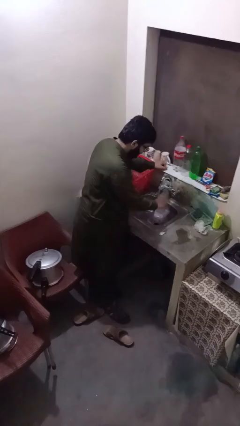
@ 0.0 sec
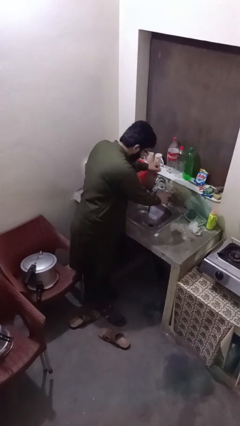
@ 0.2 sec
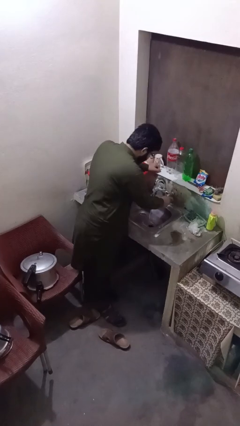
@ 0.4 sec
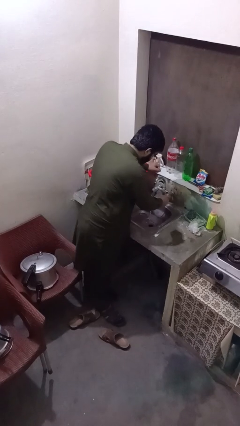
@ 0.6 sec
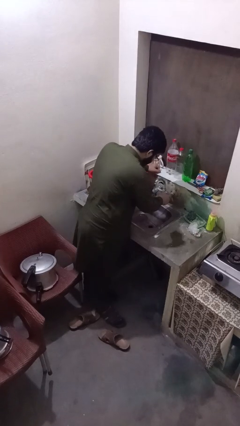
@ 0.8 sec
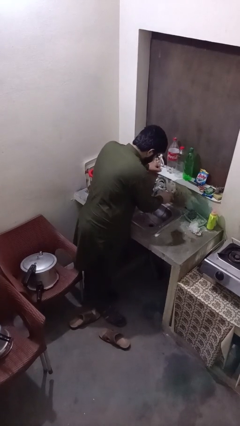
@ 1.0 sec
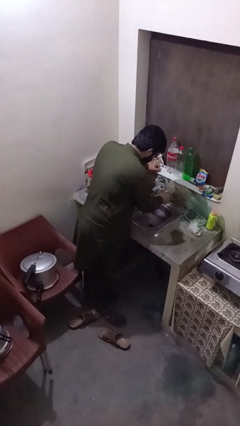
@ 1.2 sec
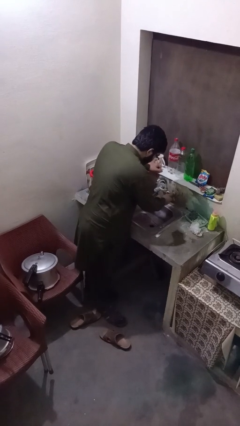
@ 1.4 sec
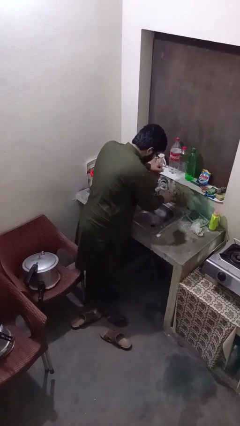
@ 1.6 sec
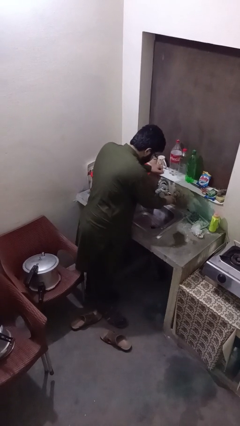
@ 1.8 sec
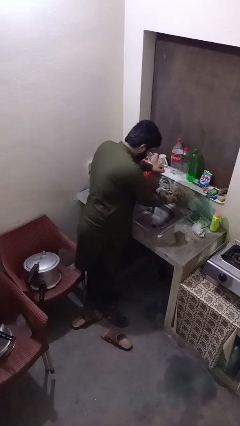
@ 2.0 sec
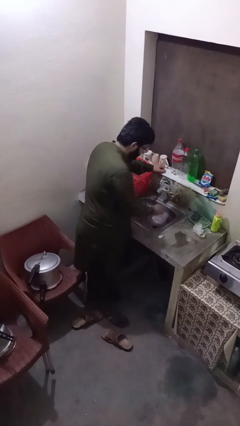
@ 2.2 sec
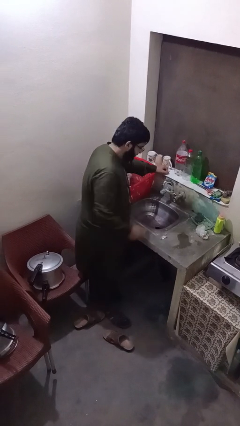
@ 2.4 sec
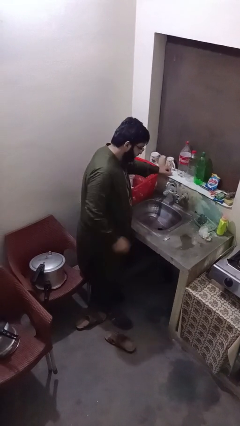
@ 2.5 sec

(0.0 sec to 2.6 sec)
person turns off faucet

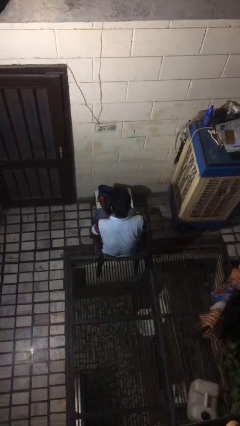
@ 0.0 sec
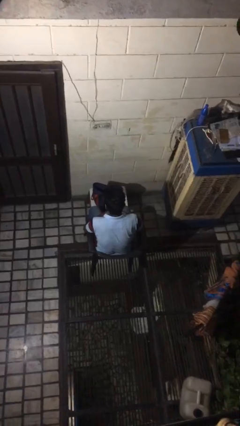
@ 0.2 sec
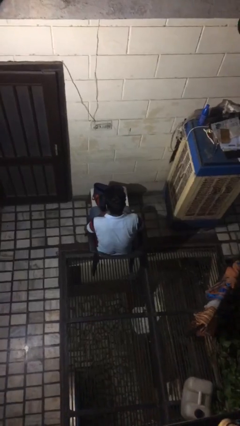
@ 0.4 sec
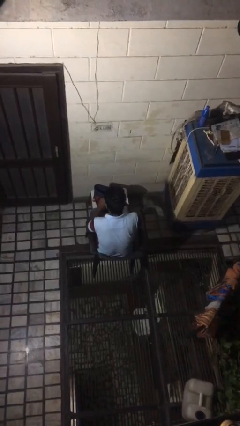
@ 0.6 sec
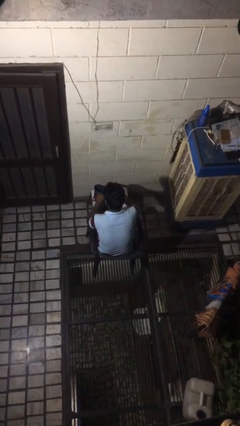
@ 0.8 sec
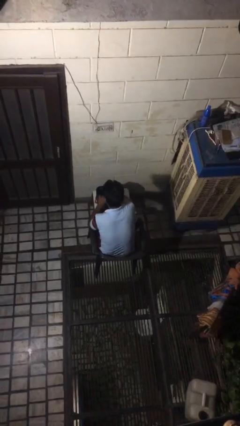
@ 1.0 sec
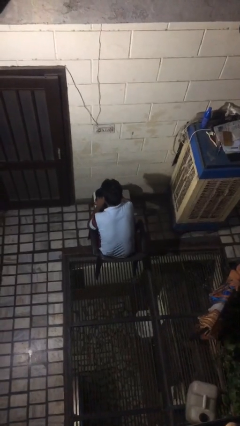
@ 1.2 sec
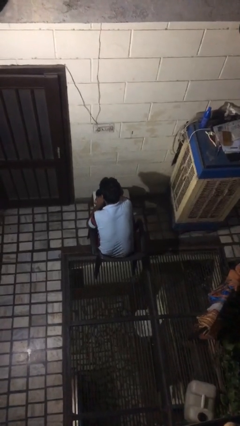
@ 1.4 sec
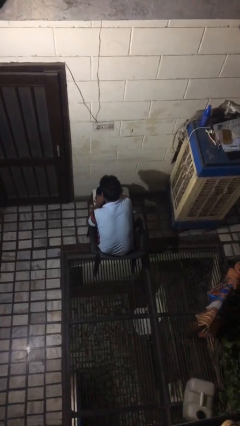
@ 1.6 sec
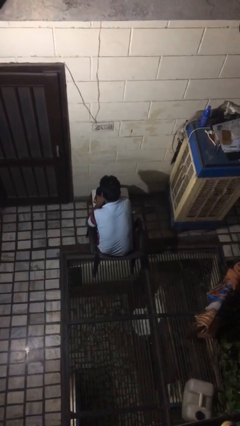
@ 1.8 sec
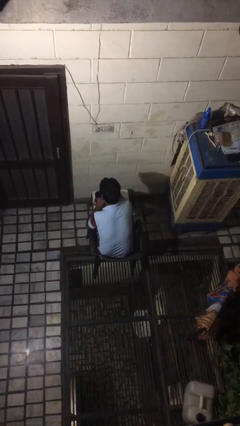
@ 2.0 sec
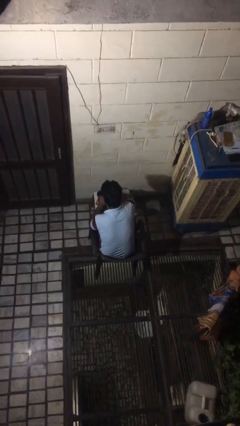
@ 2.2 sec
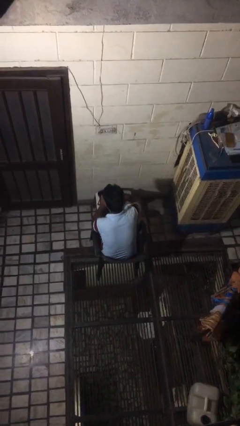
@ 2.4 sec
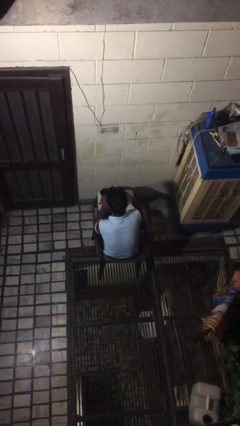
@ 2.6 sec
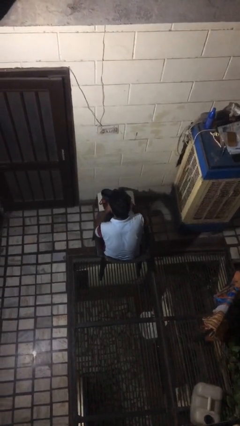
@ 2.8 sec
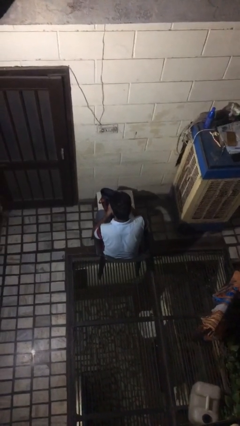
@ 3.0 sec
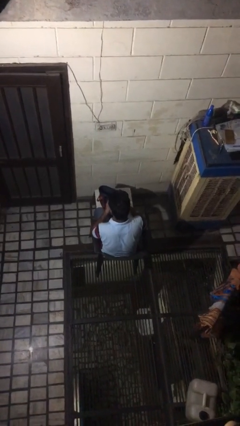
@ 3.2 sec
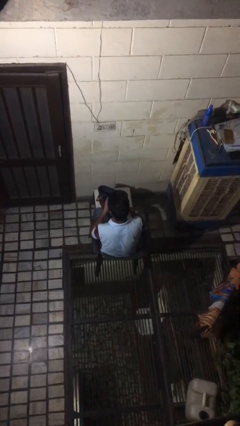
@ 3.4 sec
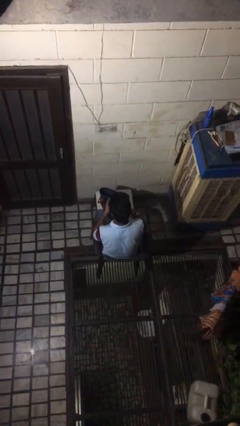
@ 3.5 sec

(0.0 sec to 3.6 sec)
person takes object from bag

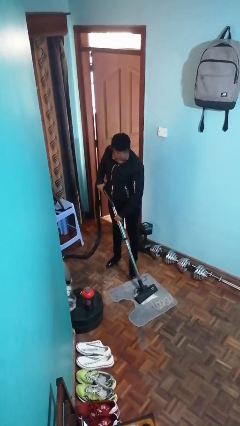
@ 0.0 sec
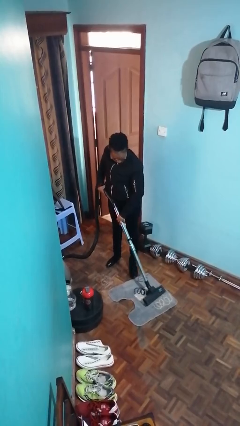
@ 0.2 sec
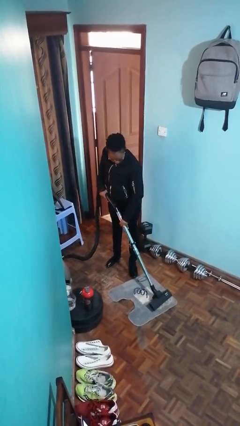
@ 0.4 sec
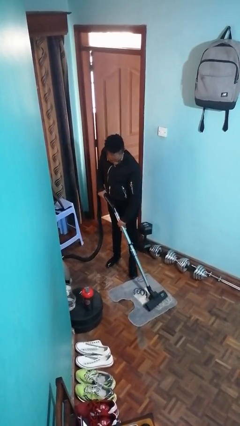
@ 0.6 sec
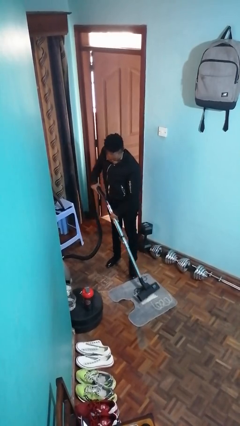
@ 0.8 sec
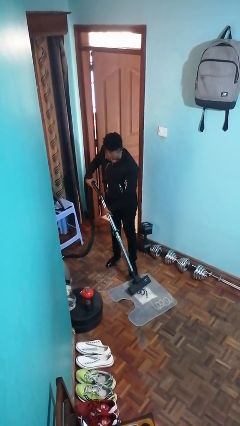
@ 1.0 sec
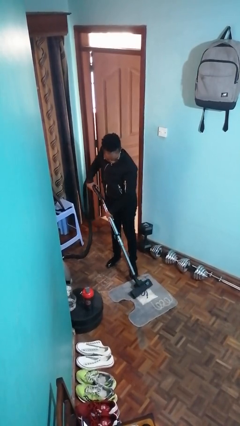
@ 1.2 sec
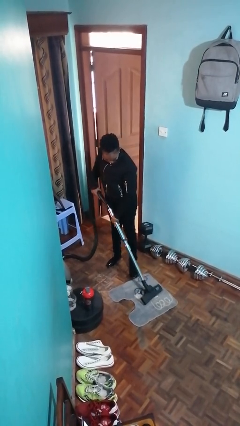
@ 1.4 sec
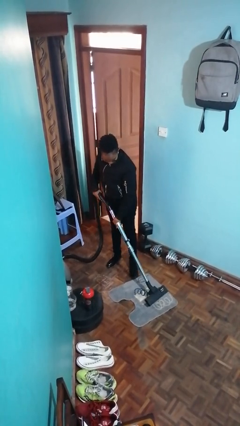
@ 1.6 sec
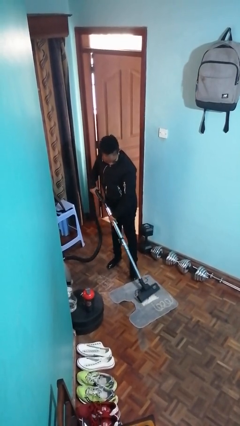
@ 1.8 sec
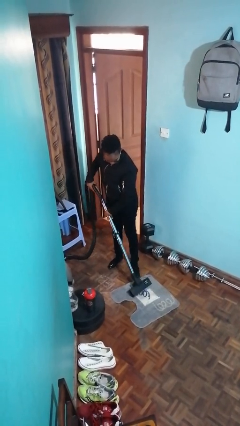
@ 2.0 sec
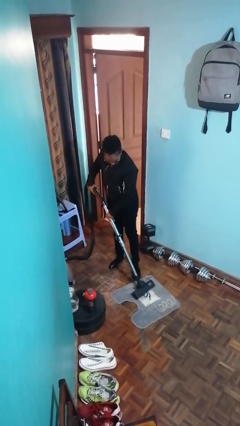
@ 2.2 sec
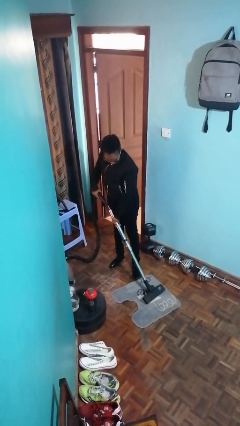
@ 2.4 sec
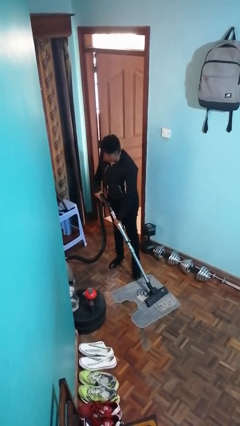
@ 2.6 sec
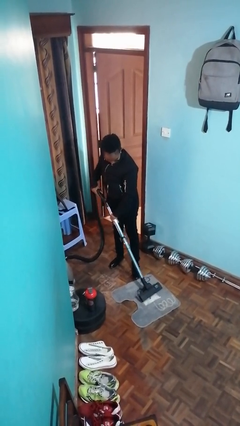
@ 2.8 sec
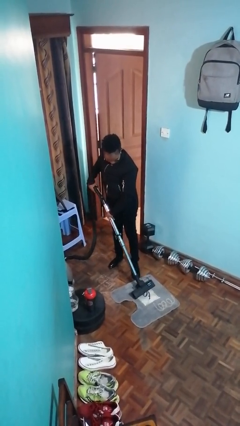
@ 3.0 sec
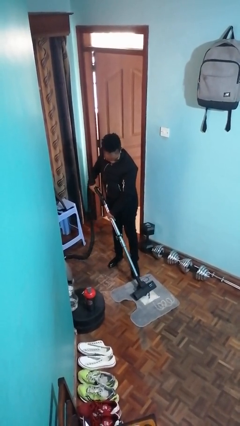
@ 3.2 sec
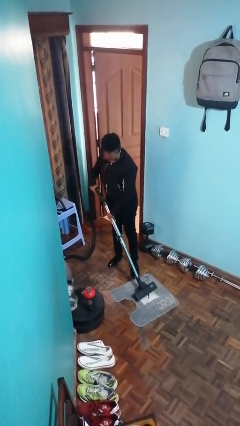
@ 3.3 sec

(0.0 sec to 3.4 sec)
person vacuums carpet

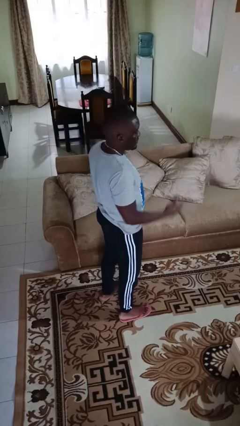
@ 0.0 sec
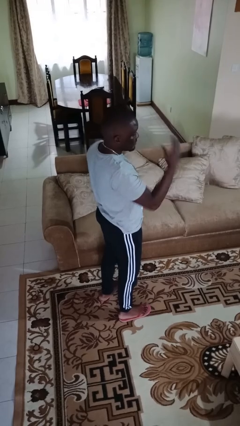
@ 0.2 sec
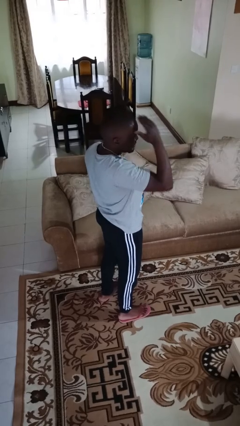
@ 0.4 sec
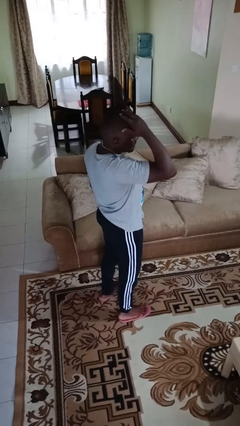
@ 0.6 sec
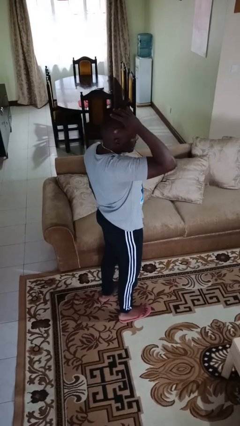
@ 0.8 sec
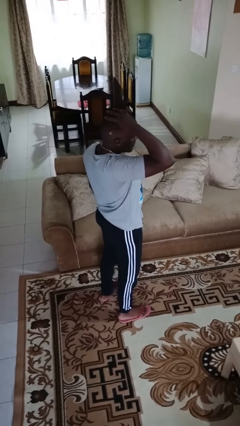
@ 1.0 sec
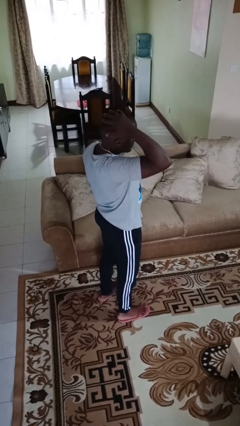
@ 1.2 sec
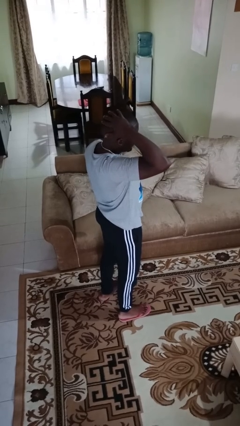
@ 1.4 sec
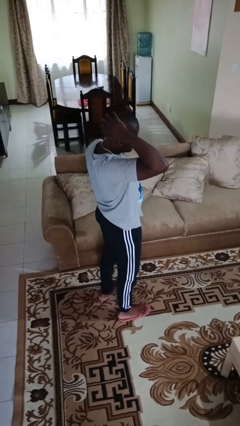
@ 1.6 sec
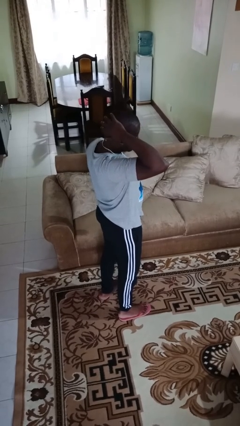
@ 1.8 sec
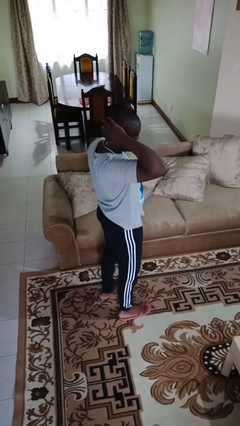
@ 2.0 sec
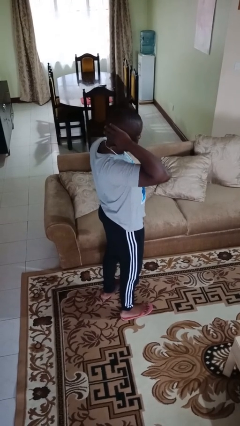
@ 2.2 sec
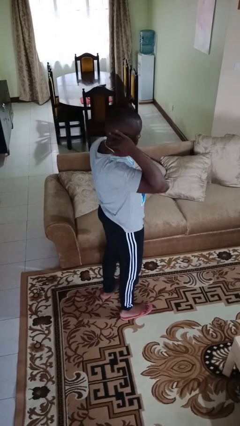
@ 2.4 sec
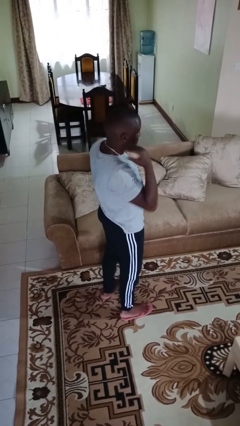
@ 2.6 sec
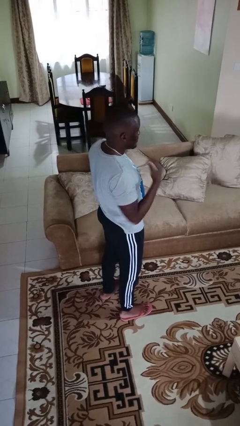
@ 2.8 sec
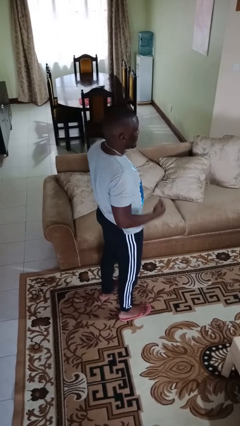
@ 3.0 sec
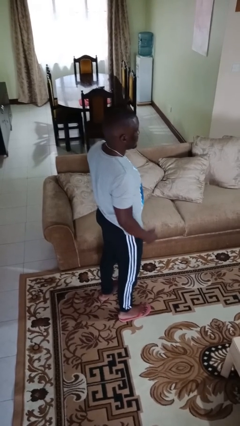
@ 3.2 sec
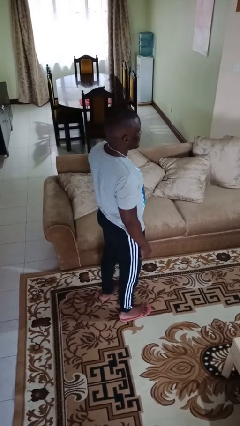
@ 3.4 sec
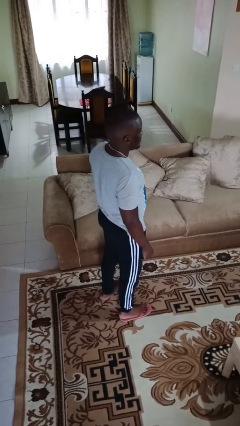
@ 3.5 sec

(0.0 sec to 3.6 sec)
person strokes hair

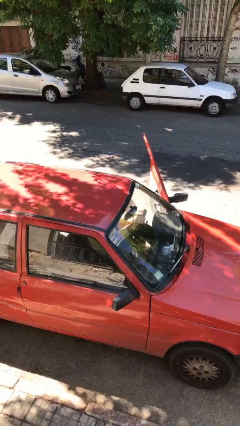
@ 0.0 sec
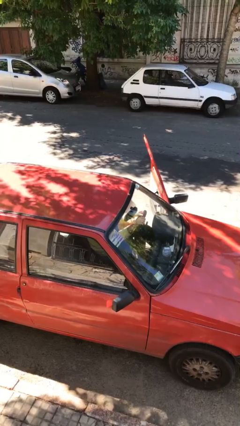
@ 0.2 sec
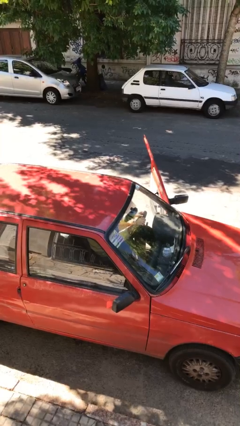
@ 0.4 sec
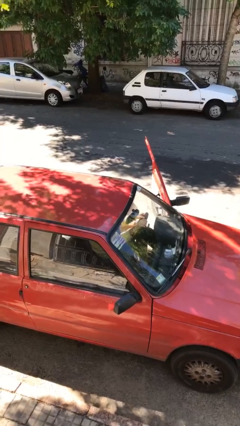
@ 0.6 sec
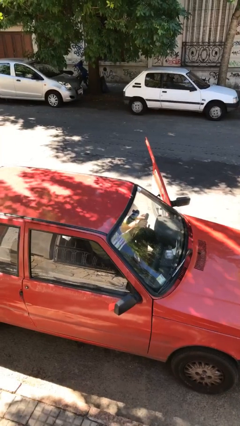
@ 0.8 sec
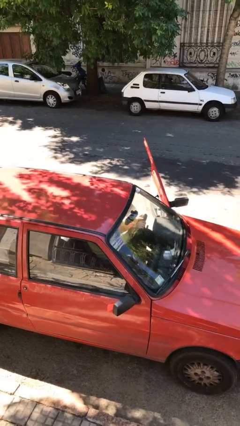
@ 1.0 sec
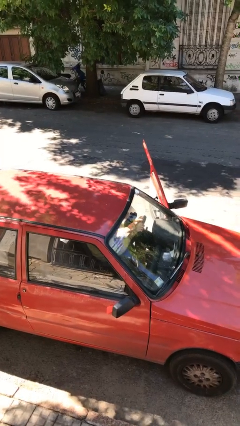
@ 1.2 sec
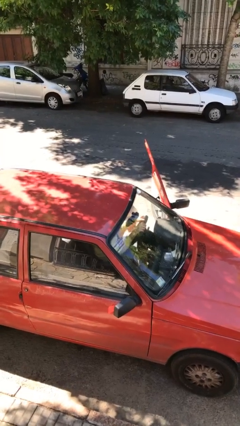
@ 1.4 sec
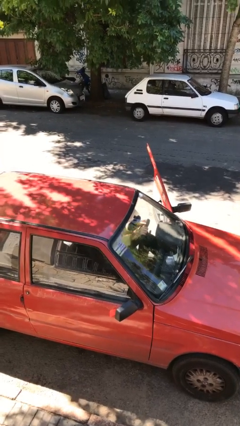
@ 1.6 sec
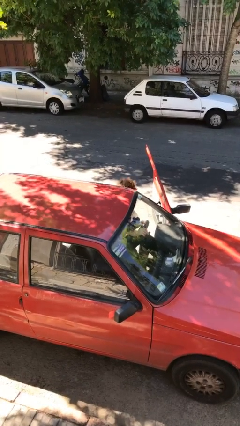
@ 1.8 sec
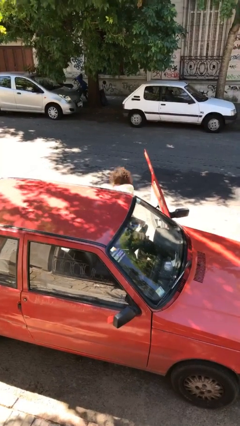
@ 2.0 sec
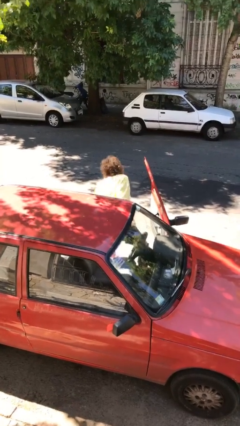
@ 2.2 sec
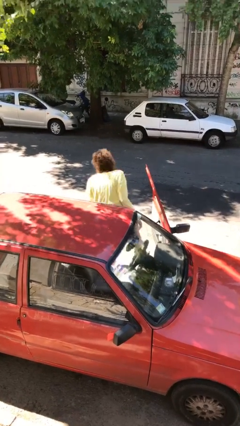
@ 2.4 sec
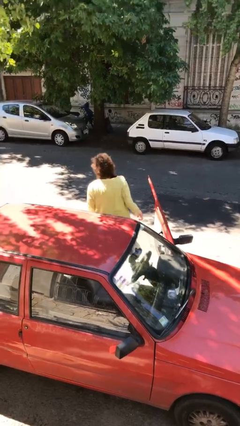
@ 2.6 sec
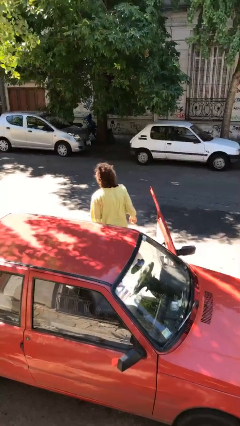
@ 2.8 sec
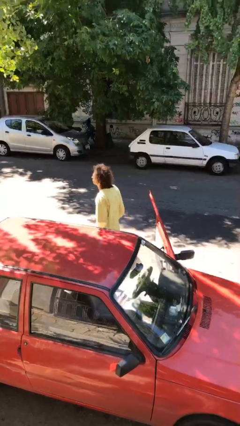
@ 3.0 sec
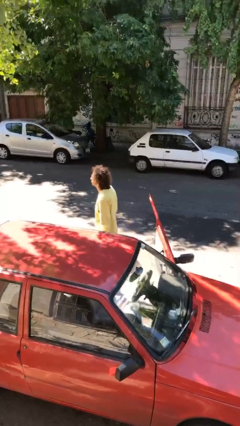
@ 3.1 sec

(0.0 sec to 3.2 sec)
person exits car

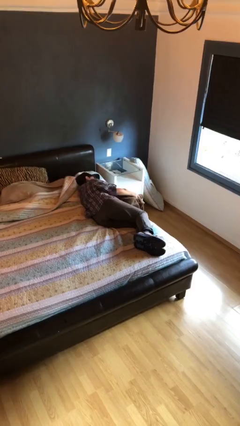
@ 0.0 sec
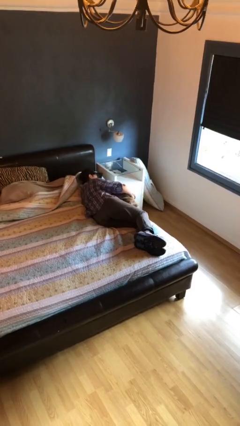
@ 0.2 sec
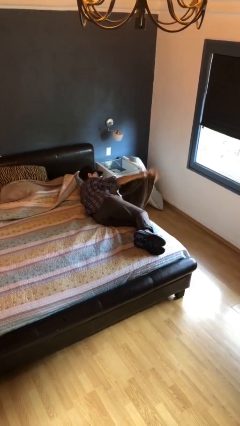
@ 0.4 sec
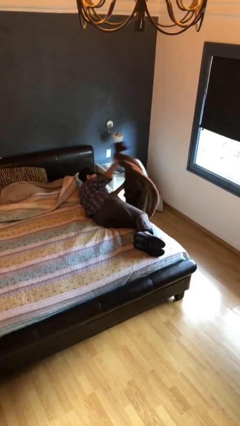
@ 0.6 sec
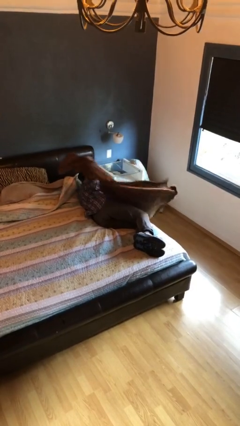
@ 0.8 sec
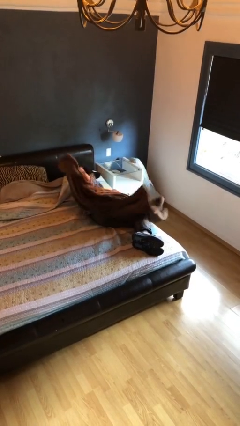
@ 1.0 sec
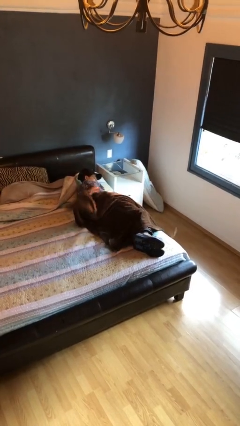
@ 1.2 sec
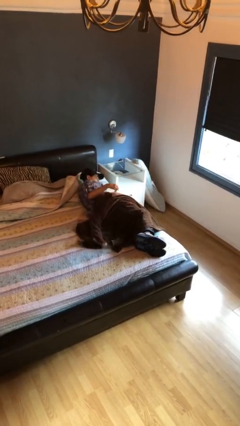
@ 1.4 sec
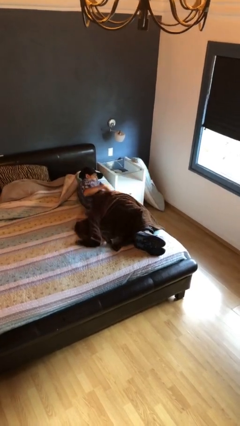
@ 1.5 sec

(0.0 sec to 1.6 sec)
person covers with blanket
